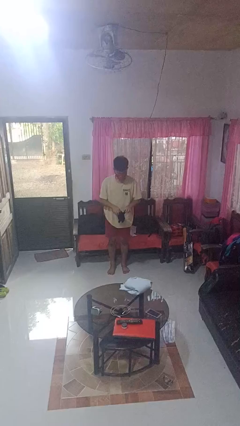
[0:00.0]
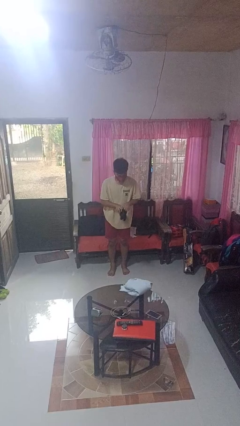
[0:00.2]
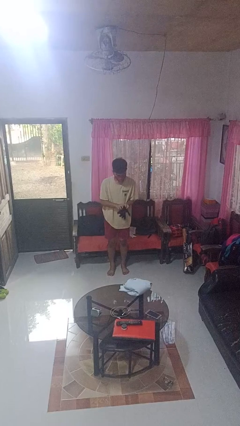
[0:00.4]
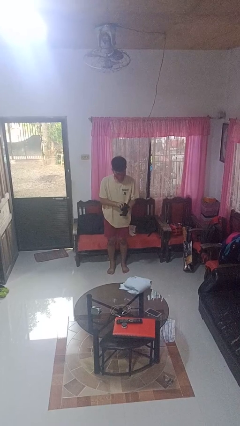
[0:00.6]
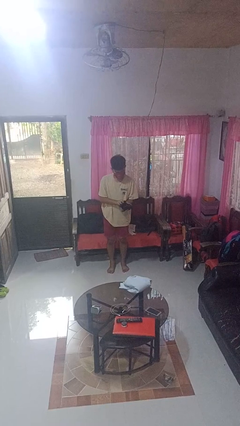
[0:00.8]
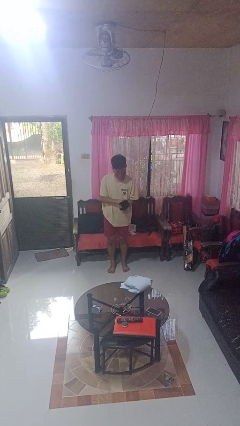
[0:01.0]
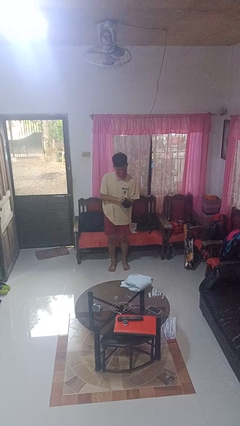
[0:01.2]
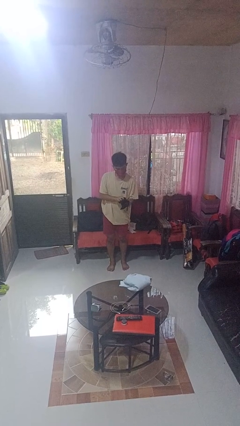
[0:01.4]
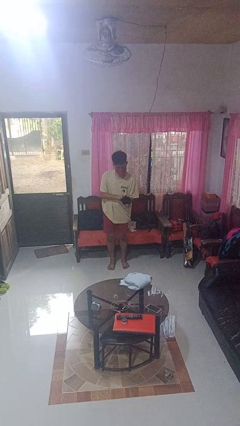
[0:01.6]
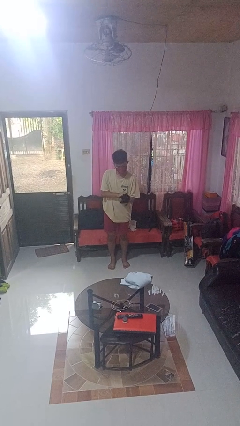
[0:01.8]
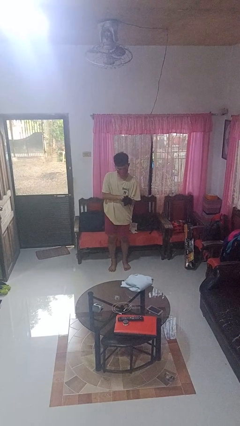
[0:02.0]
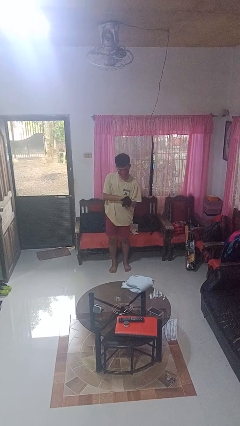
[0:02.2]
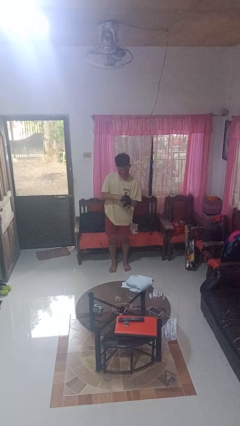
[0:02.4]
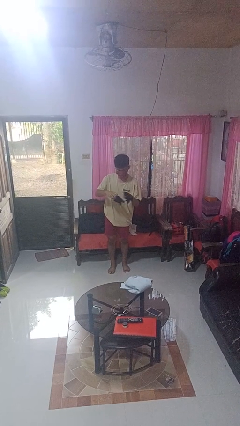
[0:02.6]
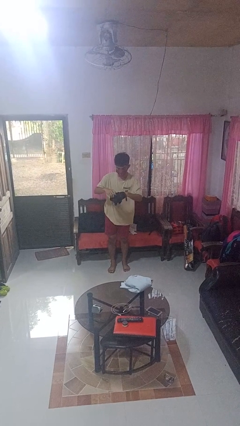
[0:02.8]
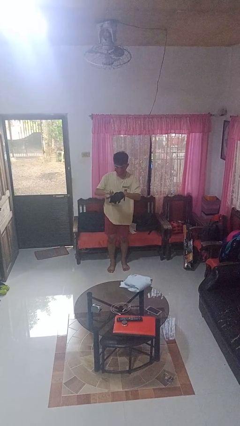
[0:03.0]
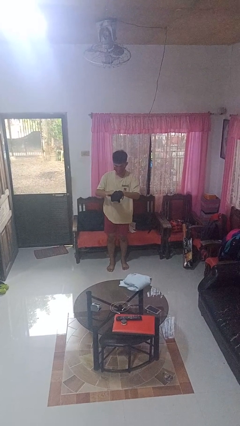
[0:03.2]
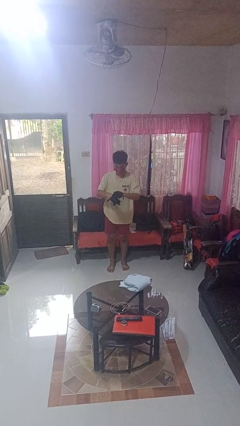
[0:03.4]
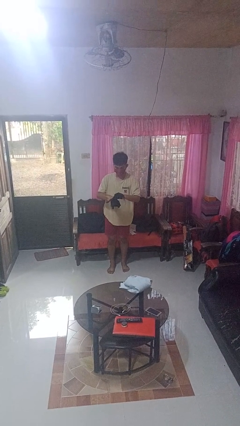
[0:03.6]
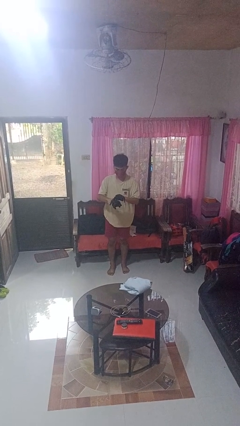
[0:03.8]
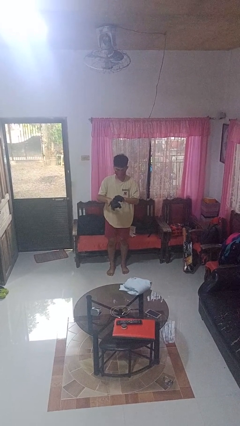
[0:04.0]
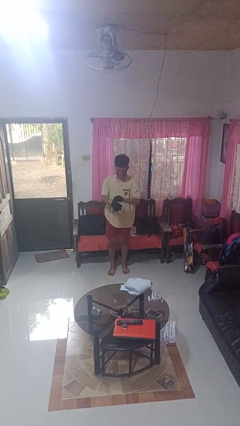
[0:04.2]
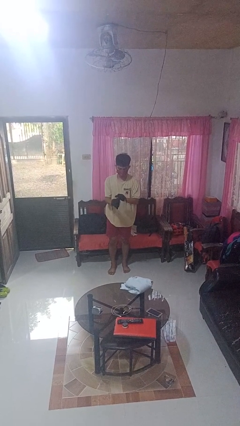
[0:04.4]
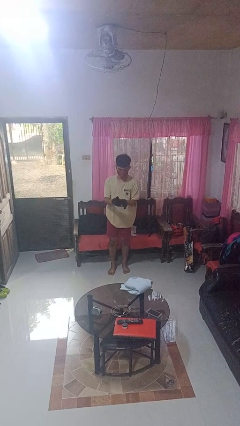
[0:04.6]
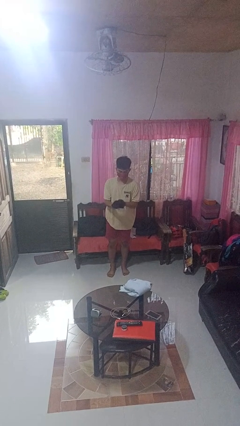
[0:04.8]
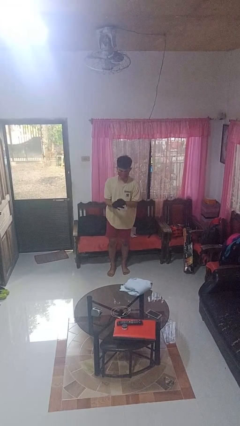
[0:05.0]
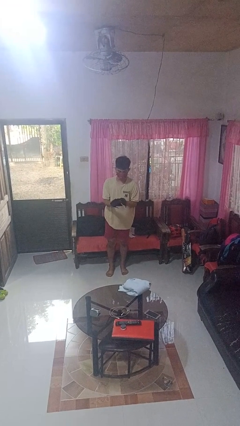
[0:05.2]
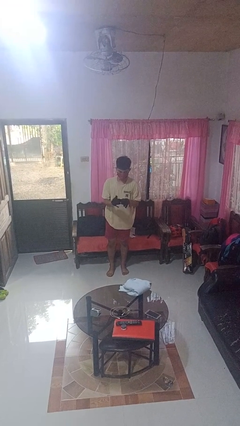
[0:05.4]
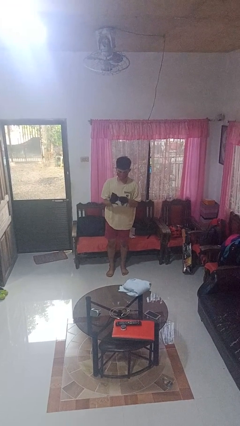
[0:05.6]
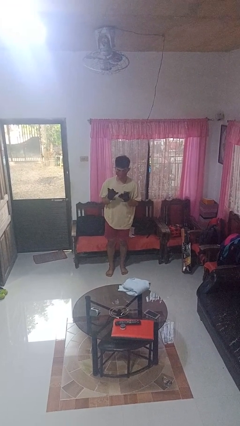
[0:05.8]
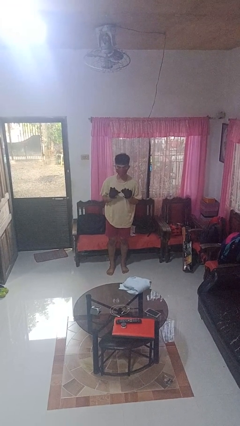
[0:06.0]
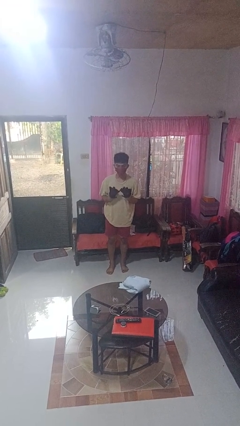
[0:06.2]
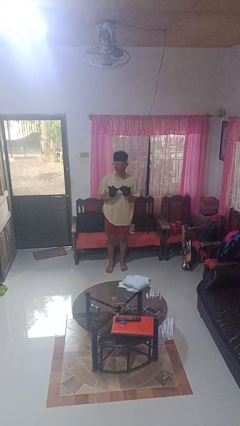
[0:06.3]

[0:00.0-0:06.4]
person puts on gloves

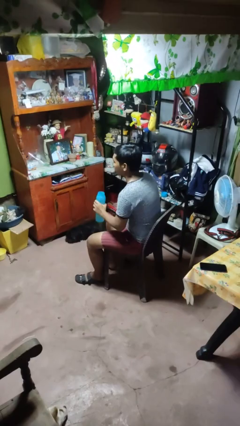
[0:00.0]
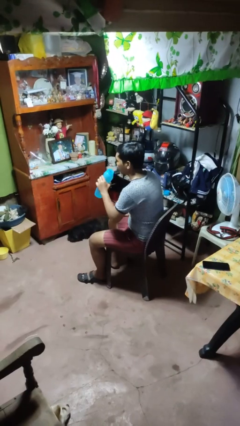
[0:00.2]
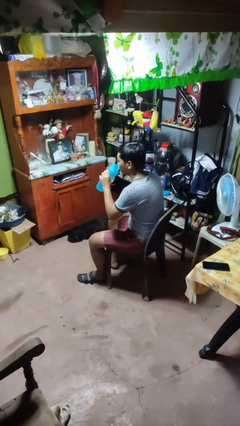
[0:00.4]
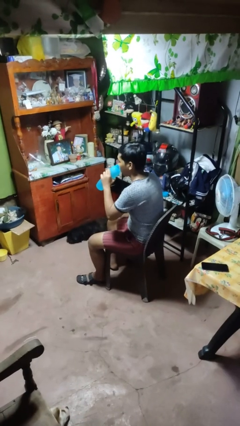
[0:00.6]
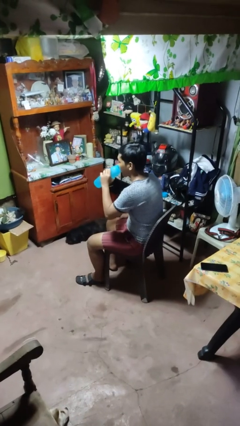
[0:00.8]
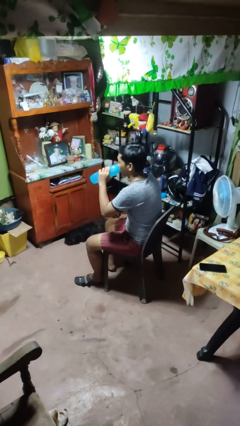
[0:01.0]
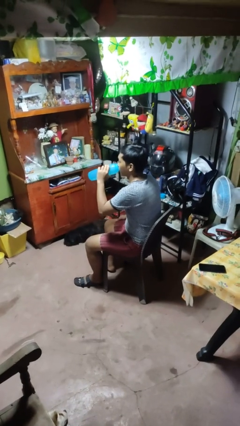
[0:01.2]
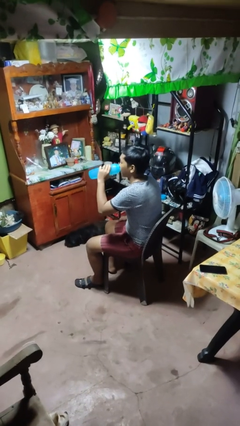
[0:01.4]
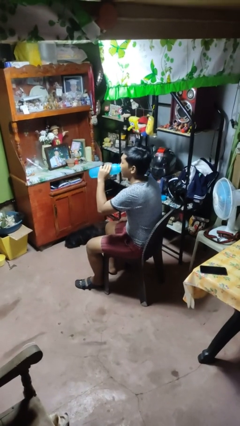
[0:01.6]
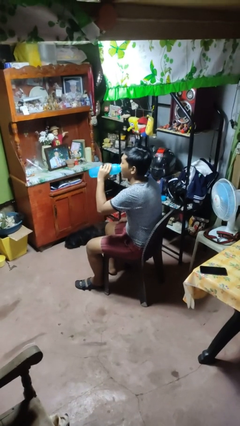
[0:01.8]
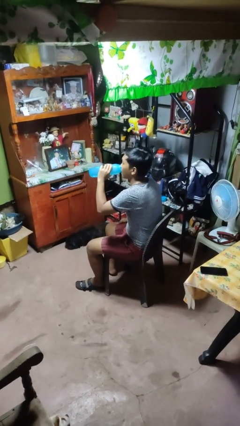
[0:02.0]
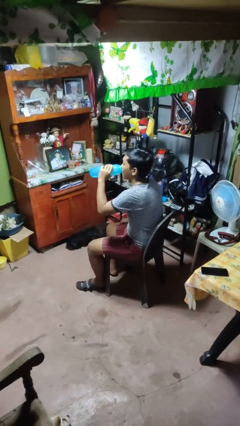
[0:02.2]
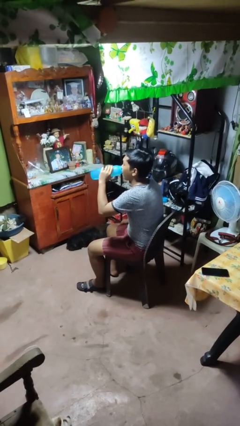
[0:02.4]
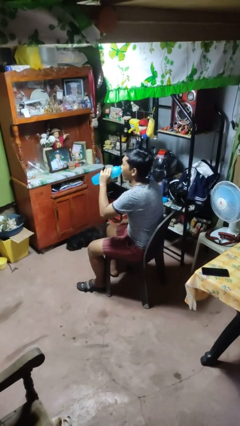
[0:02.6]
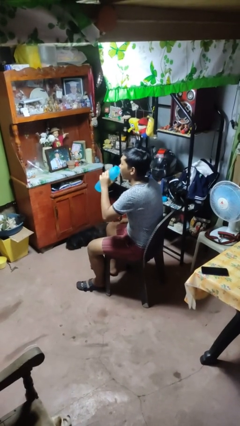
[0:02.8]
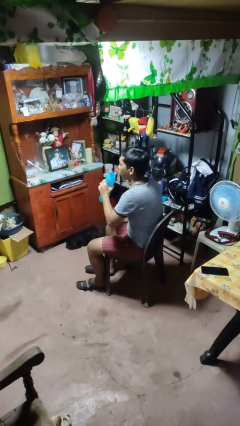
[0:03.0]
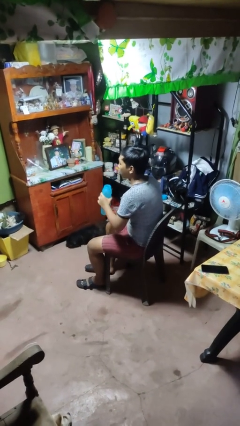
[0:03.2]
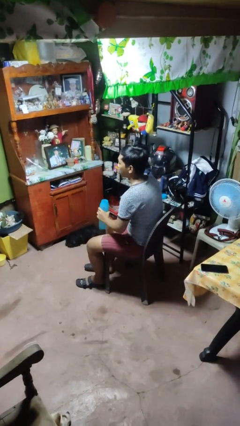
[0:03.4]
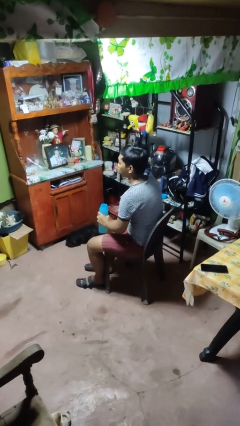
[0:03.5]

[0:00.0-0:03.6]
person drinks from bottle

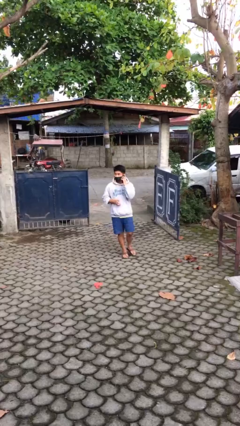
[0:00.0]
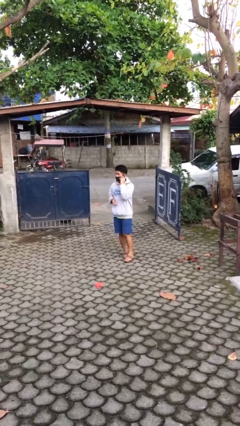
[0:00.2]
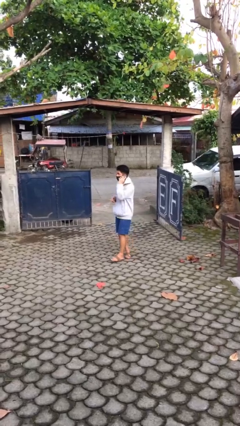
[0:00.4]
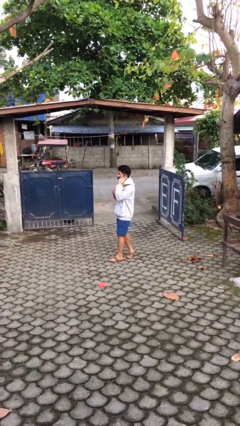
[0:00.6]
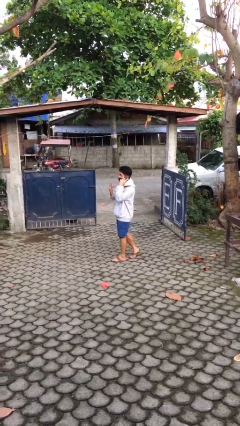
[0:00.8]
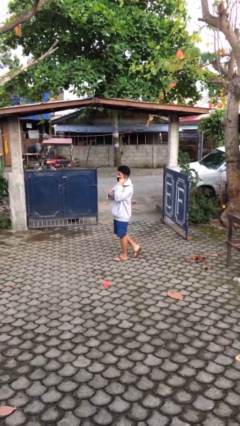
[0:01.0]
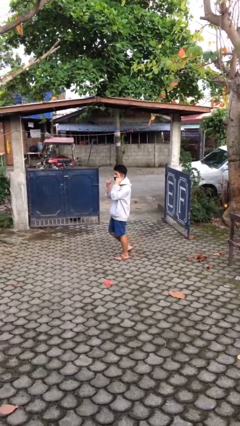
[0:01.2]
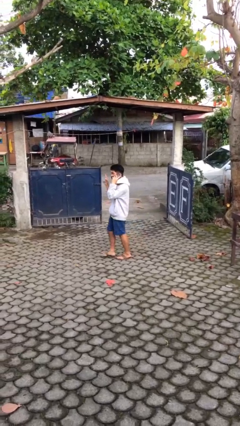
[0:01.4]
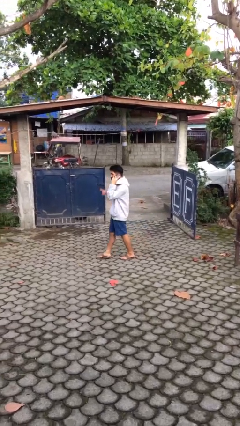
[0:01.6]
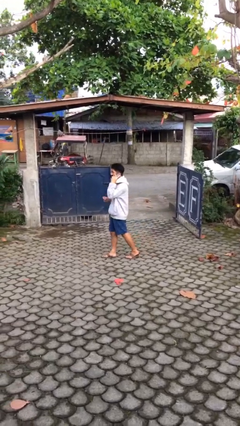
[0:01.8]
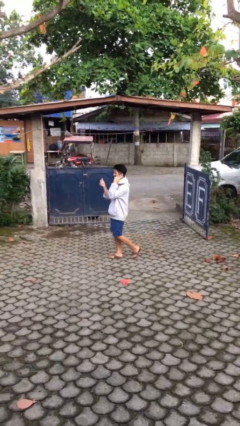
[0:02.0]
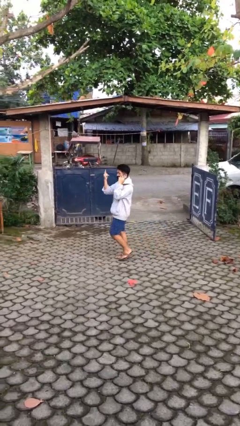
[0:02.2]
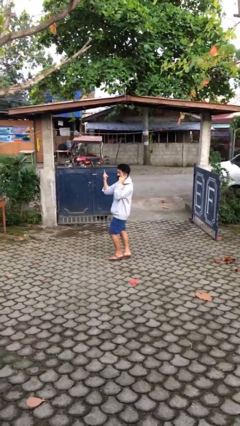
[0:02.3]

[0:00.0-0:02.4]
person talks on phone

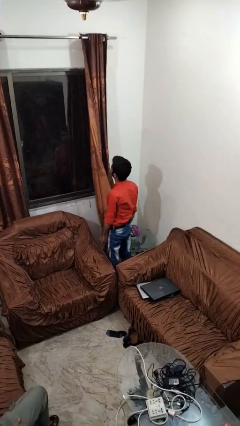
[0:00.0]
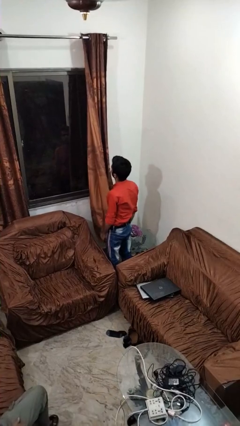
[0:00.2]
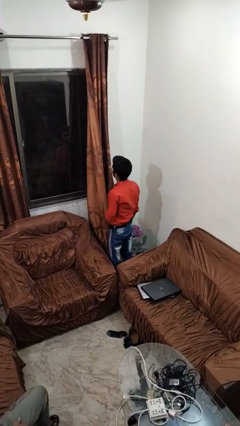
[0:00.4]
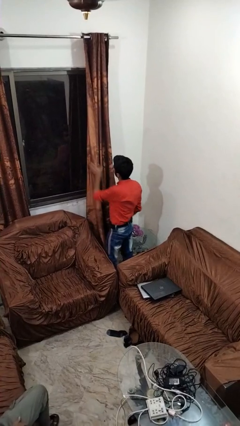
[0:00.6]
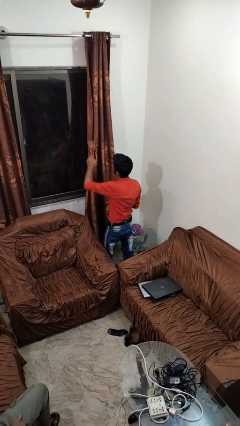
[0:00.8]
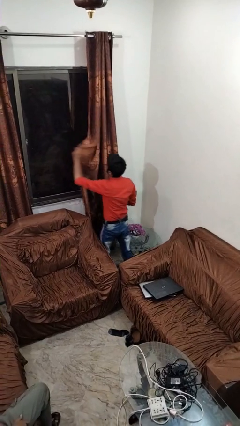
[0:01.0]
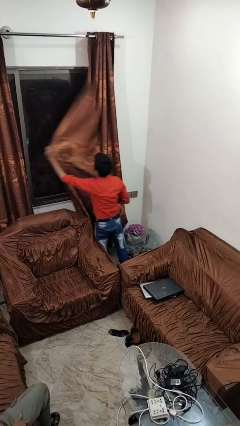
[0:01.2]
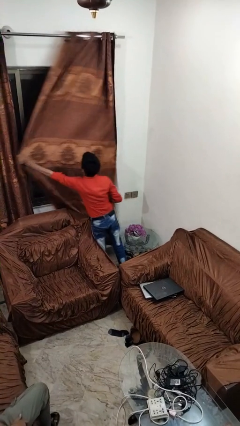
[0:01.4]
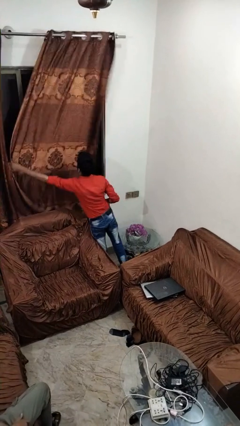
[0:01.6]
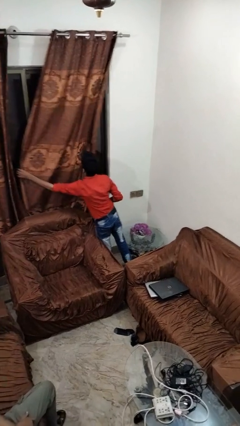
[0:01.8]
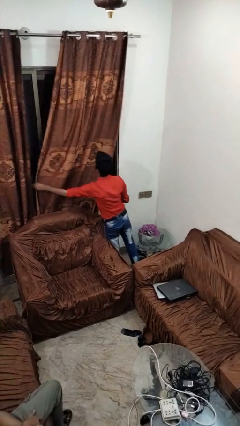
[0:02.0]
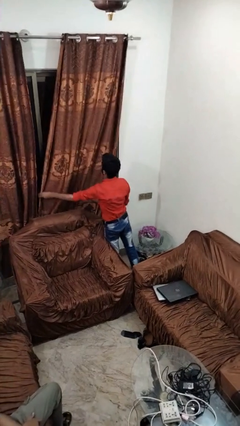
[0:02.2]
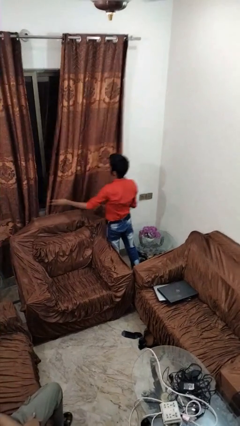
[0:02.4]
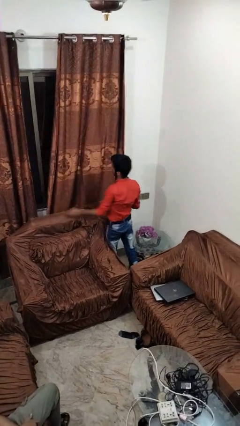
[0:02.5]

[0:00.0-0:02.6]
person closes curtains

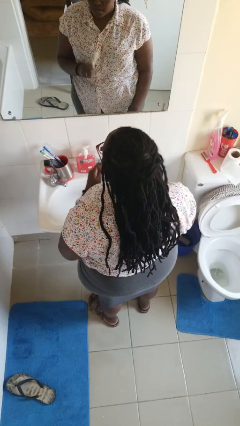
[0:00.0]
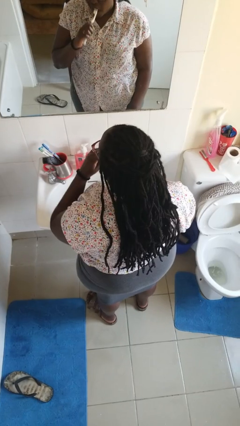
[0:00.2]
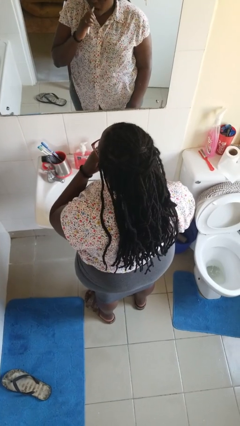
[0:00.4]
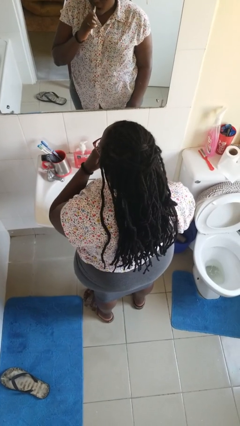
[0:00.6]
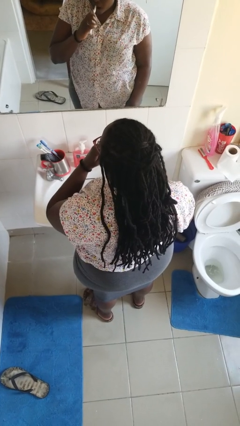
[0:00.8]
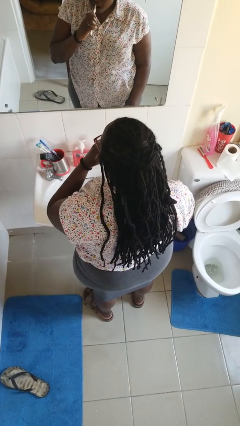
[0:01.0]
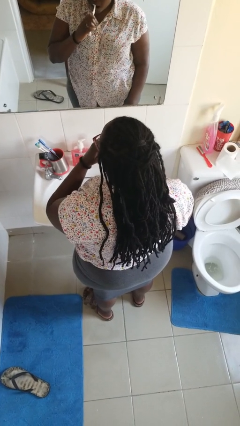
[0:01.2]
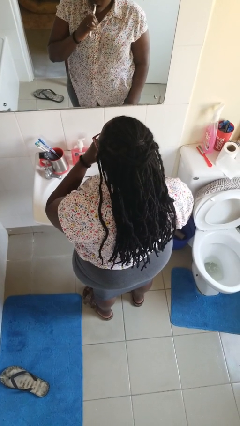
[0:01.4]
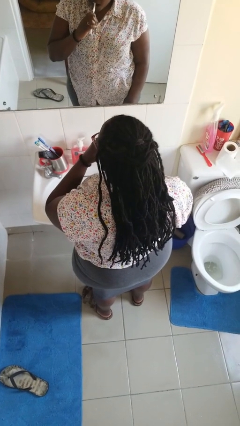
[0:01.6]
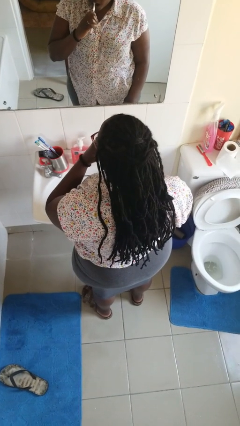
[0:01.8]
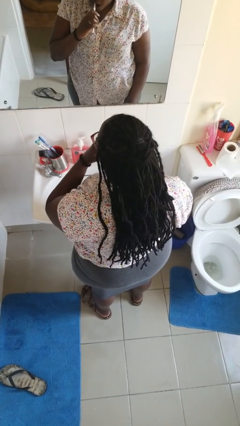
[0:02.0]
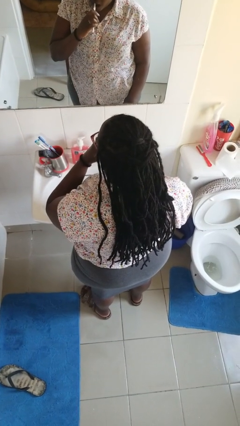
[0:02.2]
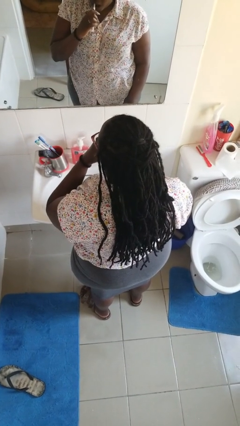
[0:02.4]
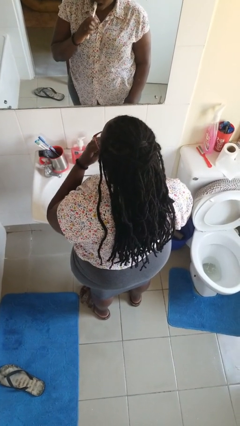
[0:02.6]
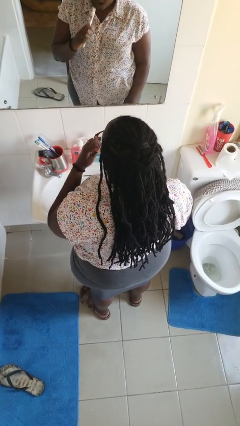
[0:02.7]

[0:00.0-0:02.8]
person brushes teeth

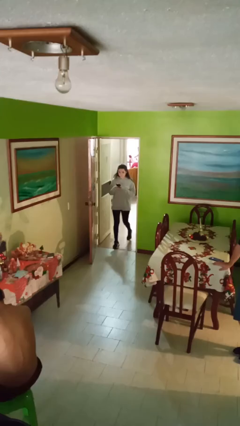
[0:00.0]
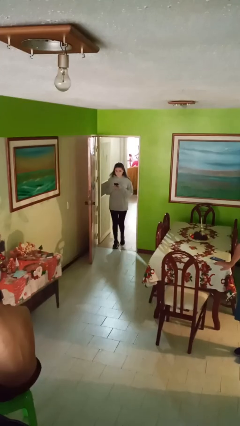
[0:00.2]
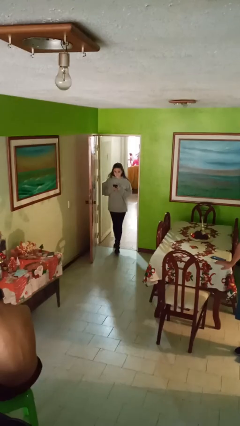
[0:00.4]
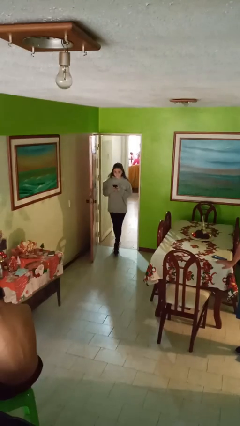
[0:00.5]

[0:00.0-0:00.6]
person enters scene through structure
